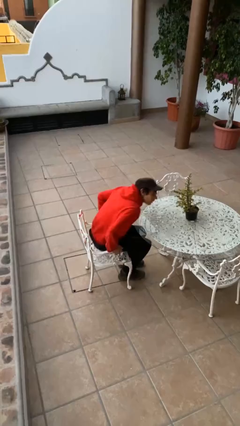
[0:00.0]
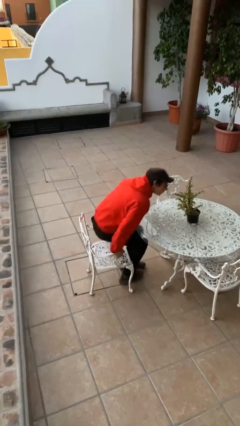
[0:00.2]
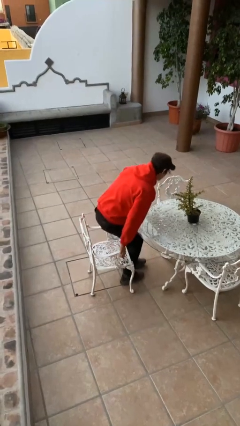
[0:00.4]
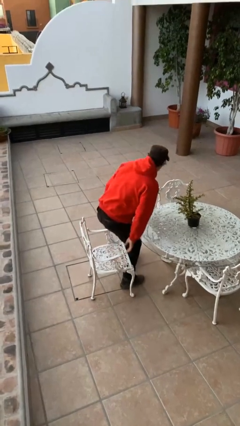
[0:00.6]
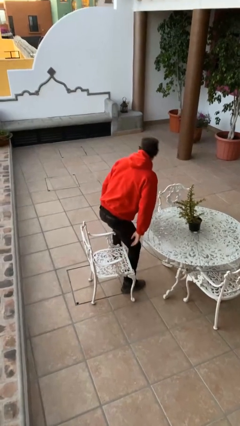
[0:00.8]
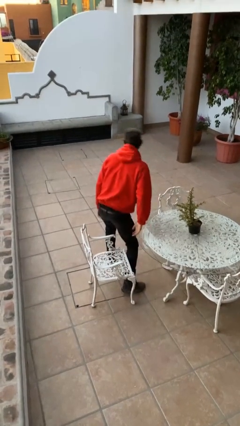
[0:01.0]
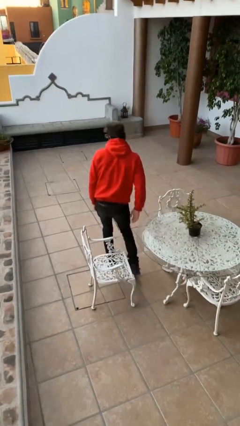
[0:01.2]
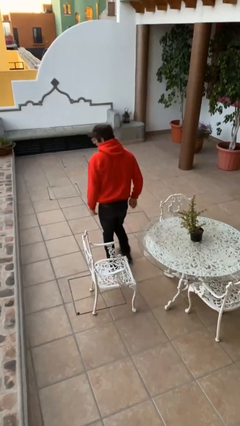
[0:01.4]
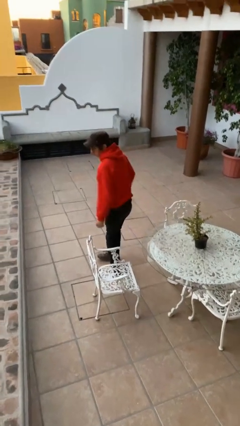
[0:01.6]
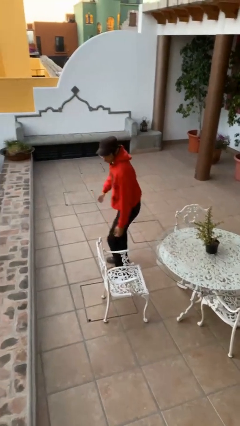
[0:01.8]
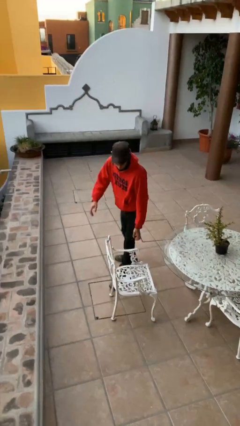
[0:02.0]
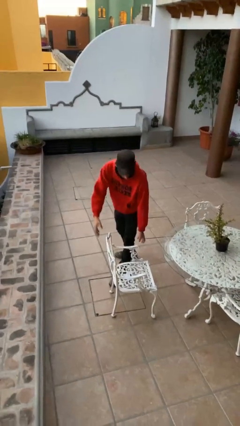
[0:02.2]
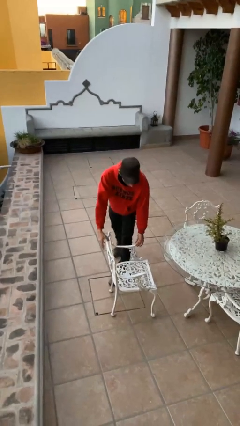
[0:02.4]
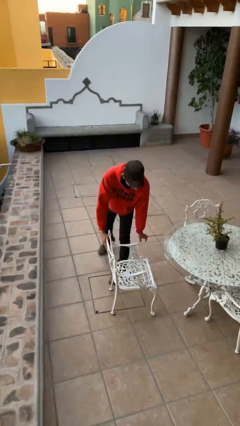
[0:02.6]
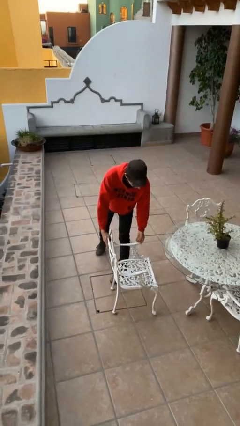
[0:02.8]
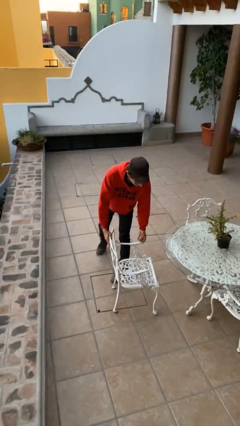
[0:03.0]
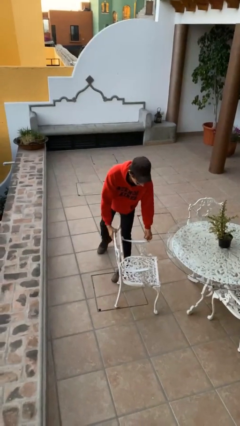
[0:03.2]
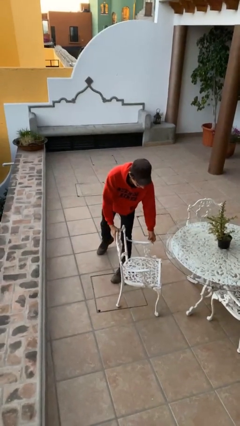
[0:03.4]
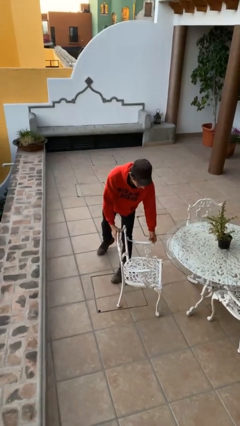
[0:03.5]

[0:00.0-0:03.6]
person stands up

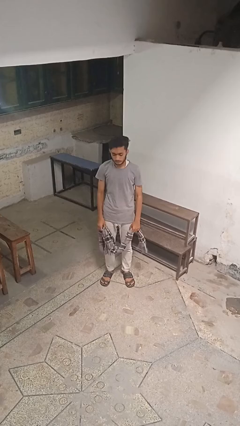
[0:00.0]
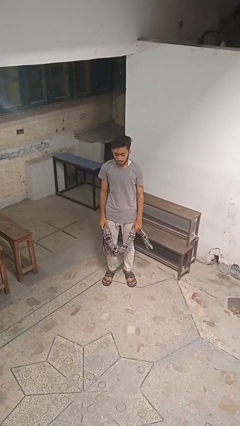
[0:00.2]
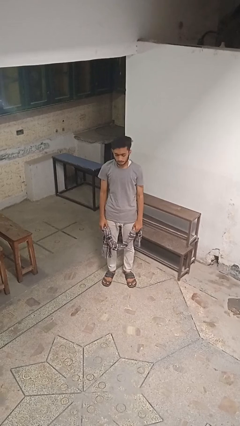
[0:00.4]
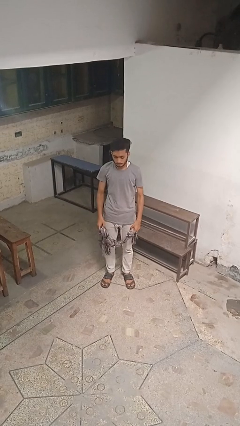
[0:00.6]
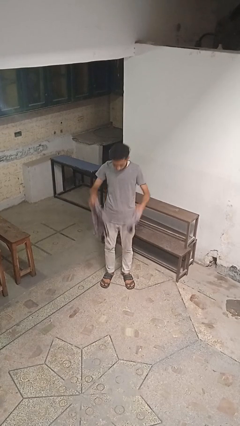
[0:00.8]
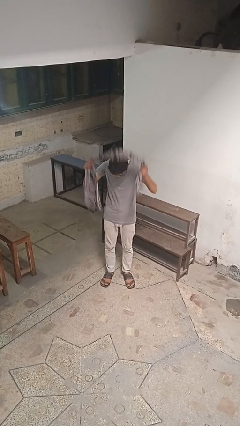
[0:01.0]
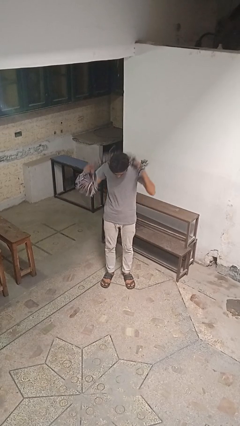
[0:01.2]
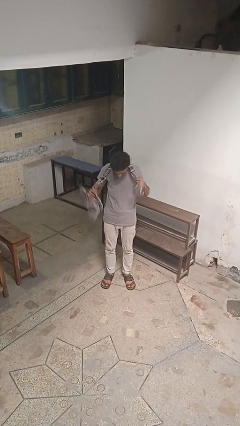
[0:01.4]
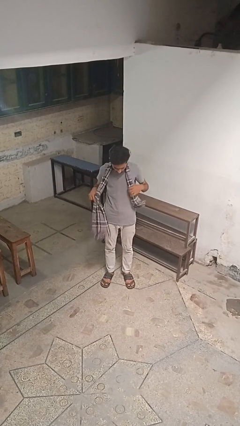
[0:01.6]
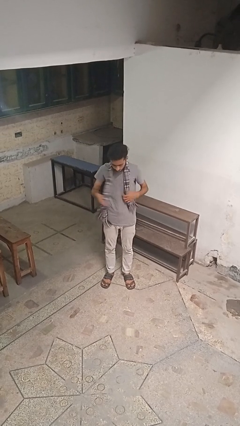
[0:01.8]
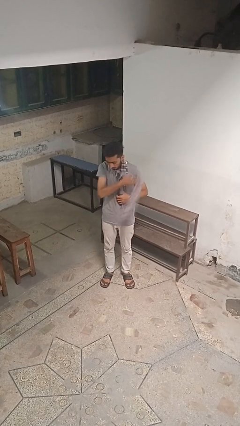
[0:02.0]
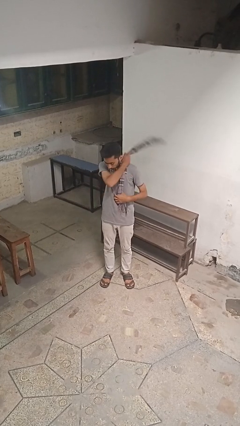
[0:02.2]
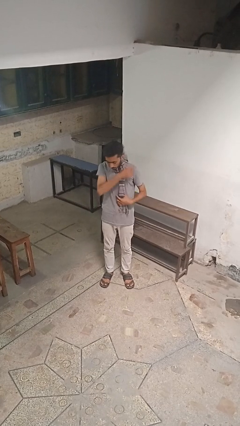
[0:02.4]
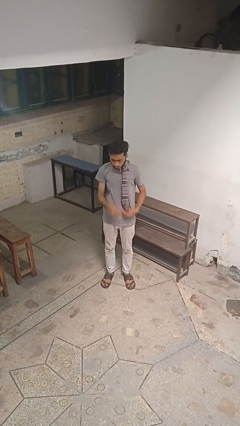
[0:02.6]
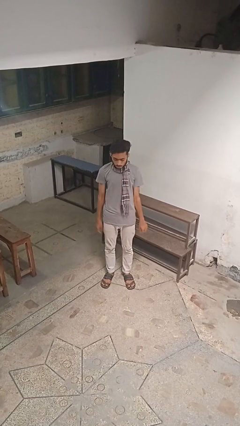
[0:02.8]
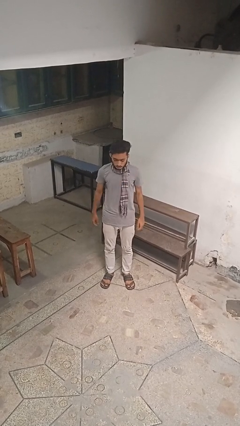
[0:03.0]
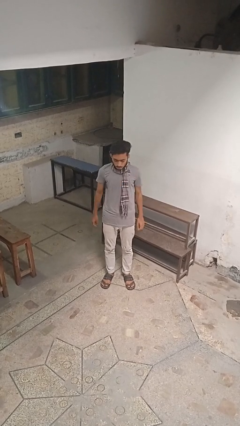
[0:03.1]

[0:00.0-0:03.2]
person puts on scarf

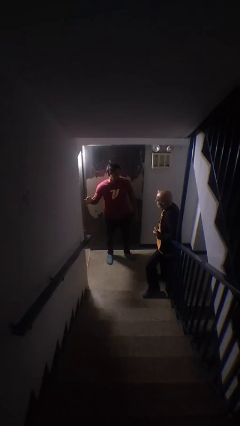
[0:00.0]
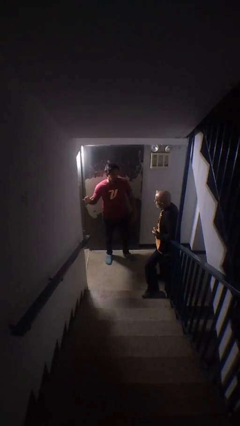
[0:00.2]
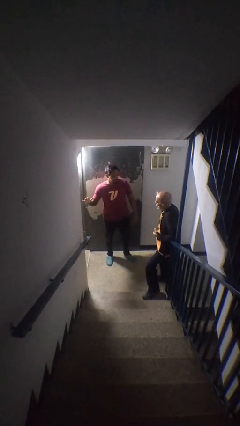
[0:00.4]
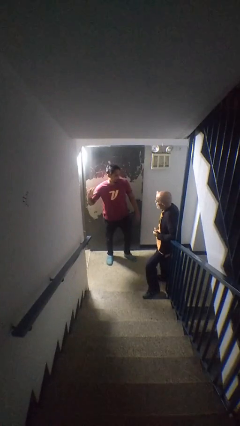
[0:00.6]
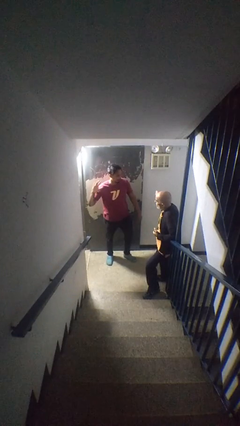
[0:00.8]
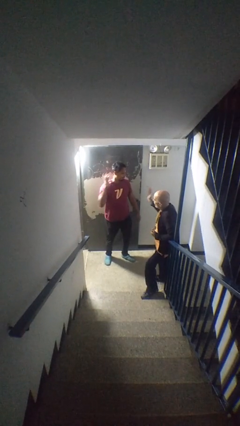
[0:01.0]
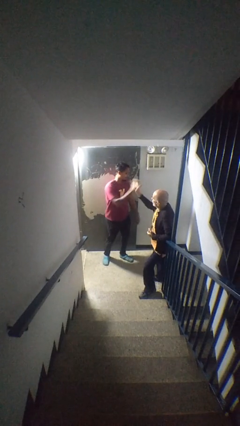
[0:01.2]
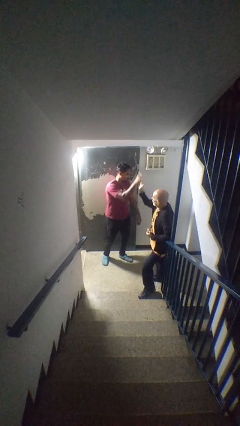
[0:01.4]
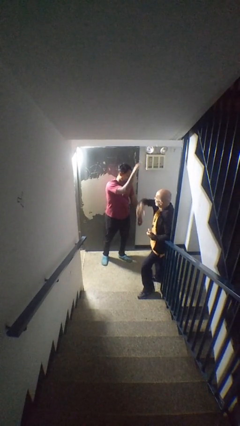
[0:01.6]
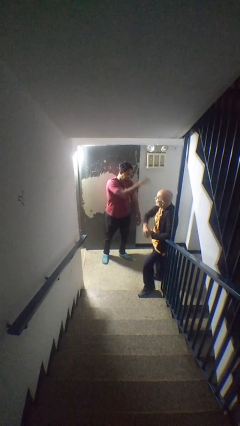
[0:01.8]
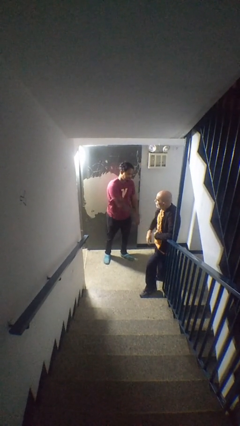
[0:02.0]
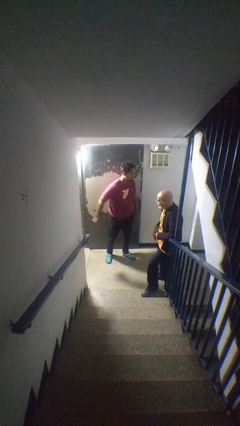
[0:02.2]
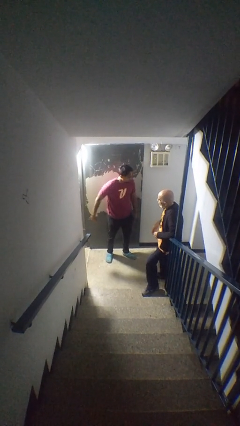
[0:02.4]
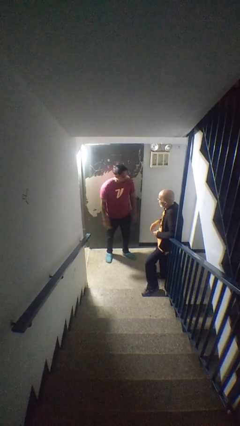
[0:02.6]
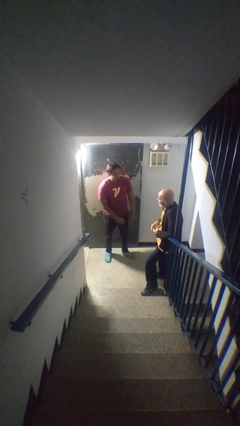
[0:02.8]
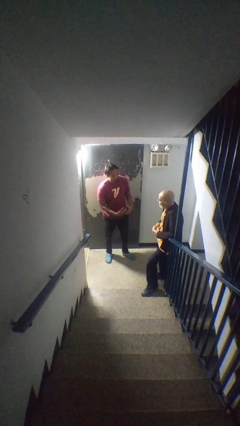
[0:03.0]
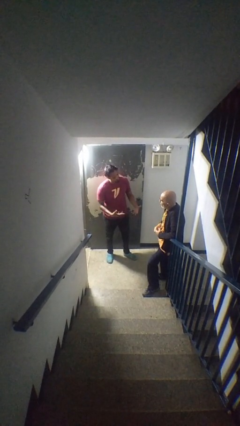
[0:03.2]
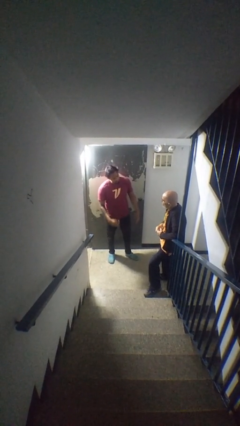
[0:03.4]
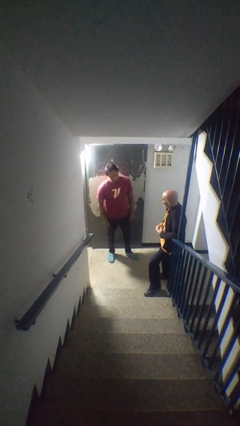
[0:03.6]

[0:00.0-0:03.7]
person highfives hand

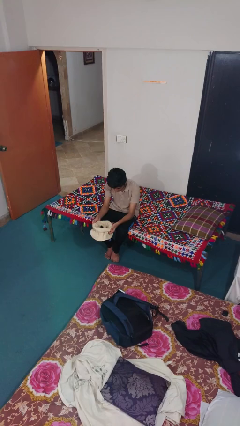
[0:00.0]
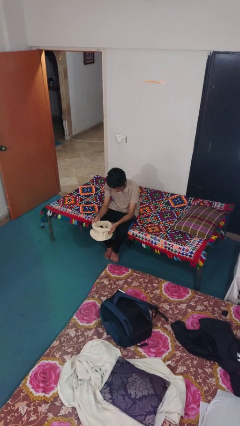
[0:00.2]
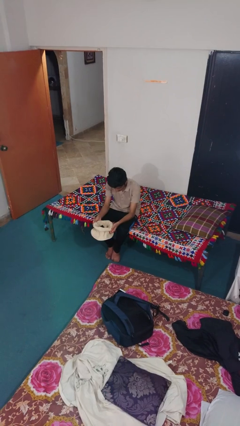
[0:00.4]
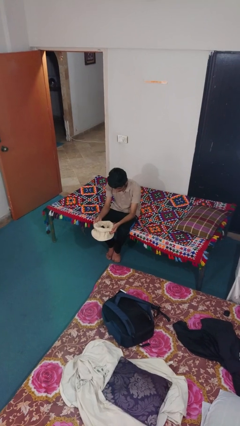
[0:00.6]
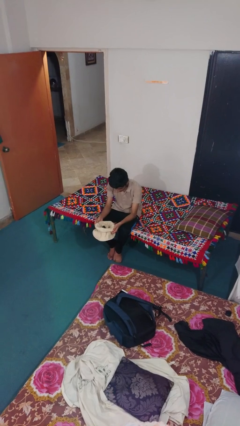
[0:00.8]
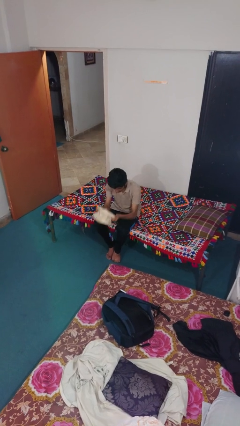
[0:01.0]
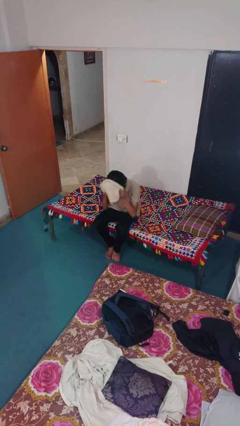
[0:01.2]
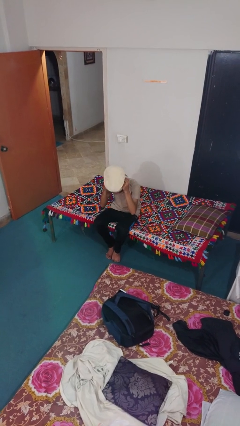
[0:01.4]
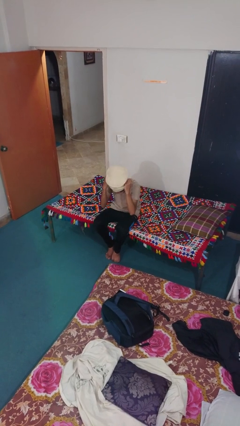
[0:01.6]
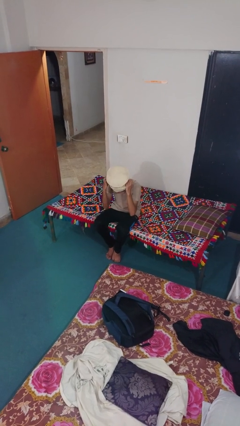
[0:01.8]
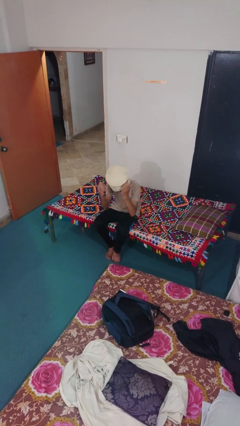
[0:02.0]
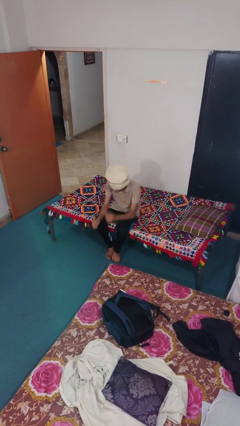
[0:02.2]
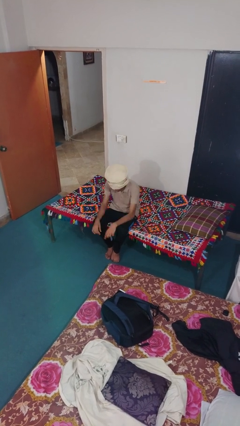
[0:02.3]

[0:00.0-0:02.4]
person puts on hat

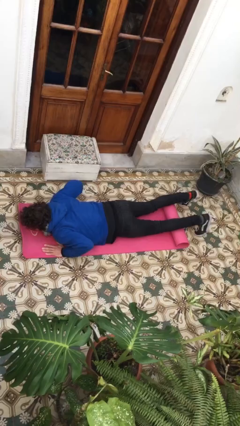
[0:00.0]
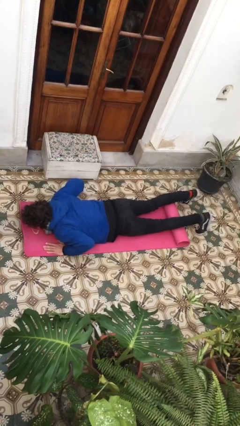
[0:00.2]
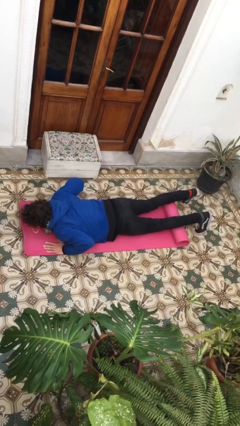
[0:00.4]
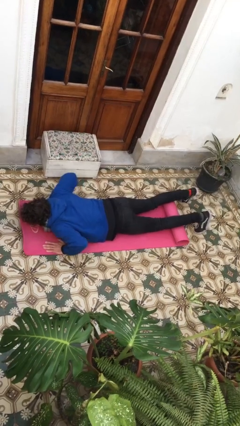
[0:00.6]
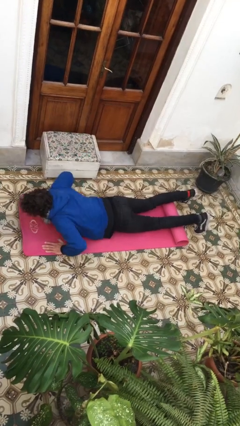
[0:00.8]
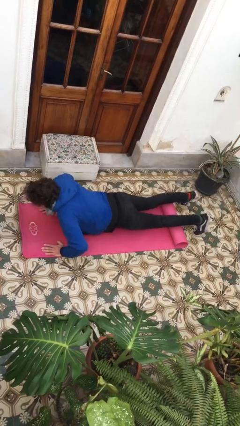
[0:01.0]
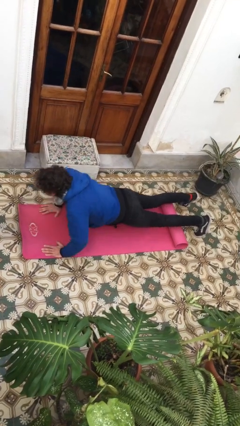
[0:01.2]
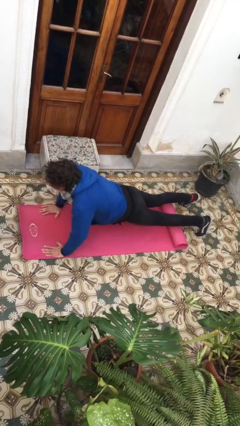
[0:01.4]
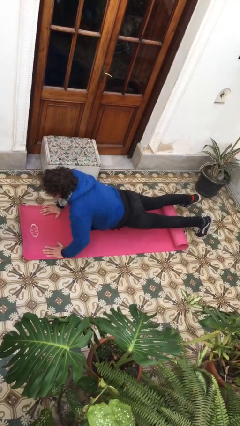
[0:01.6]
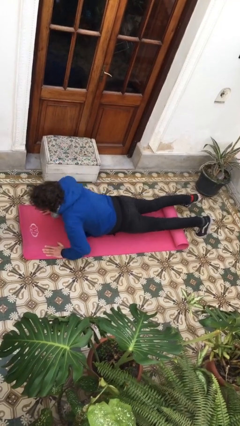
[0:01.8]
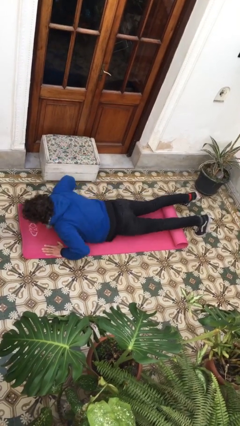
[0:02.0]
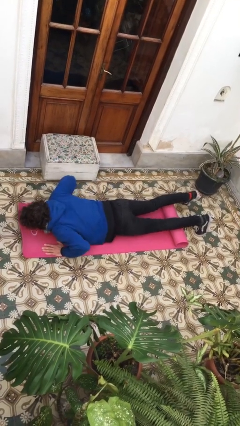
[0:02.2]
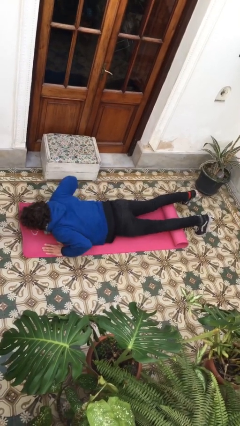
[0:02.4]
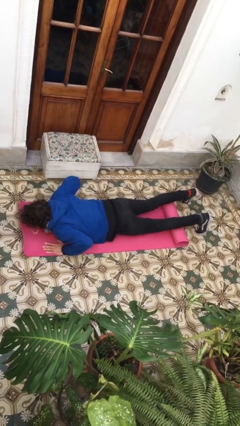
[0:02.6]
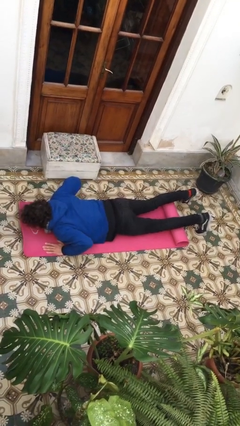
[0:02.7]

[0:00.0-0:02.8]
person exercises with pushup

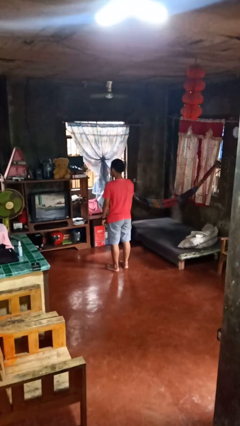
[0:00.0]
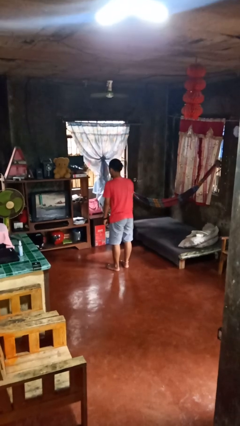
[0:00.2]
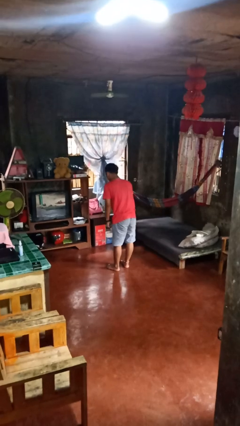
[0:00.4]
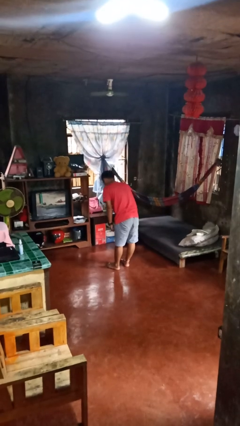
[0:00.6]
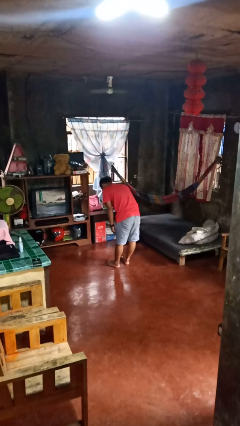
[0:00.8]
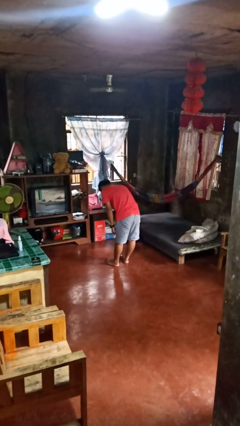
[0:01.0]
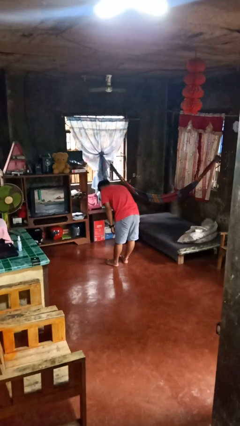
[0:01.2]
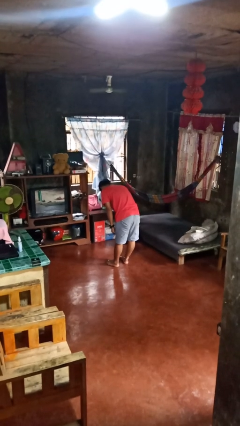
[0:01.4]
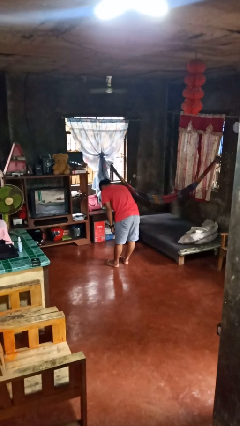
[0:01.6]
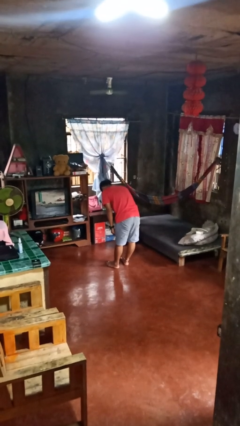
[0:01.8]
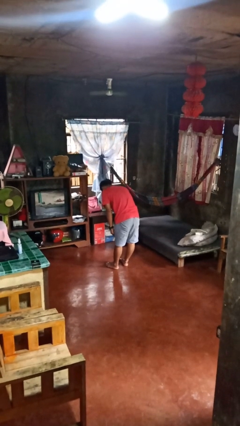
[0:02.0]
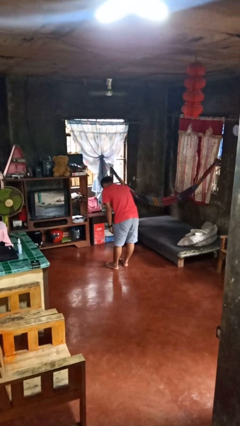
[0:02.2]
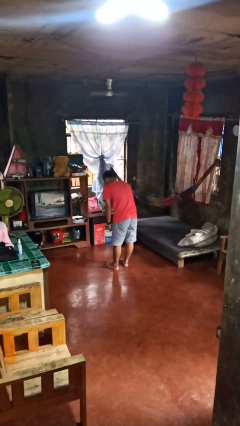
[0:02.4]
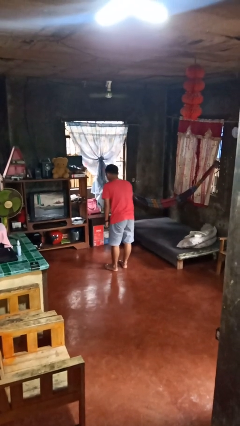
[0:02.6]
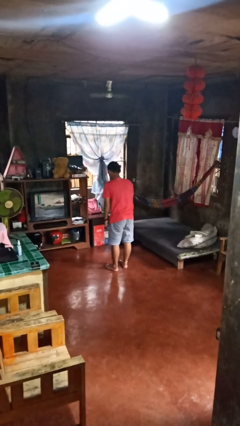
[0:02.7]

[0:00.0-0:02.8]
person bows
